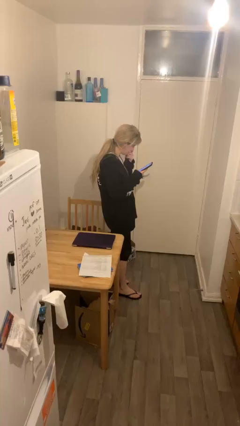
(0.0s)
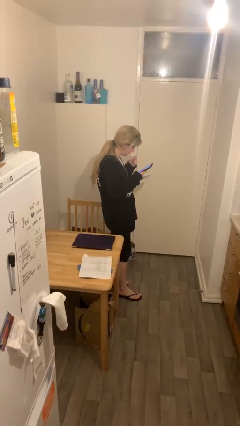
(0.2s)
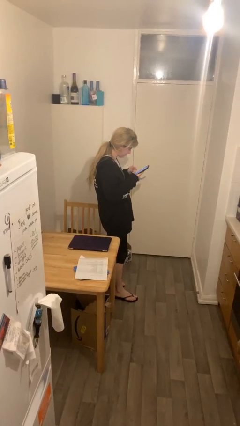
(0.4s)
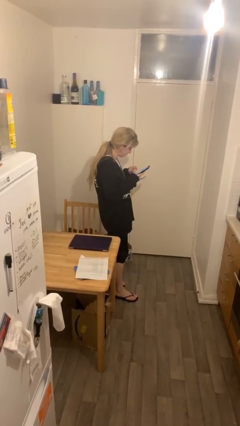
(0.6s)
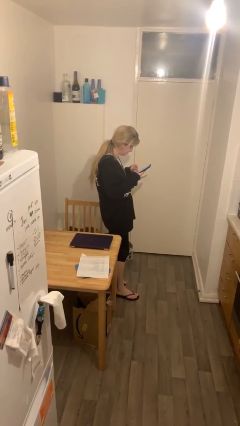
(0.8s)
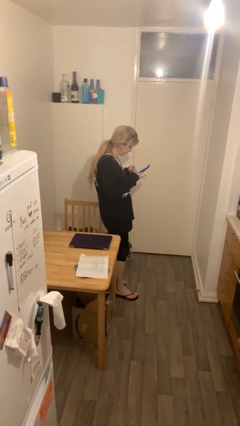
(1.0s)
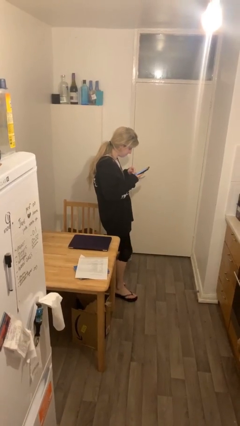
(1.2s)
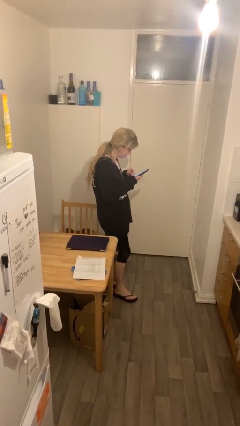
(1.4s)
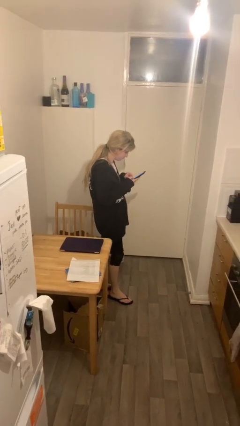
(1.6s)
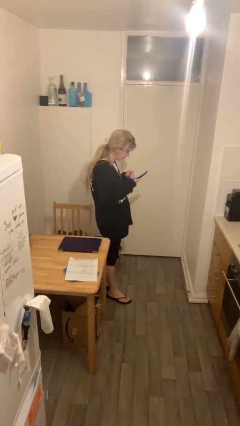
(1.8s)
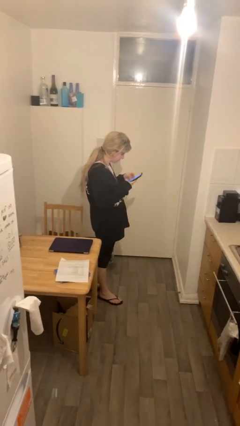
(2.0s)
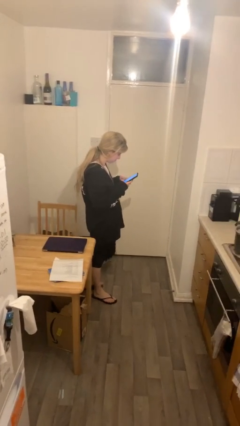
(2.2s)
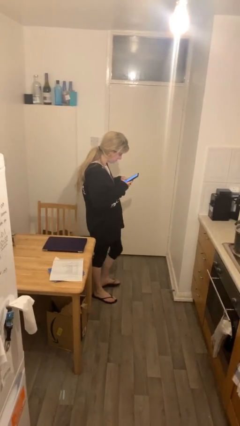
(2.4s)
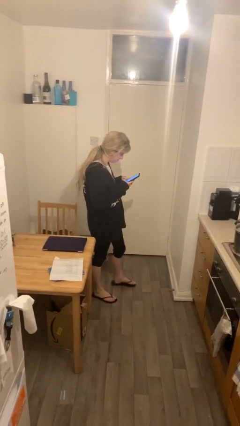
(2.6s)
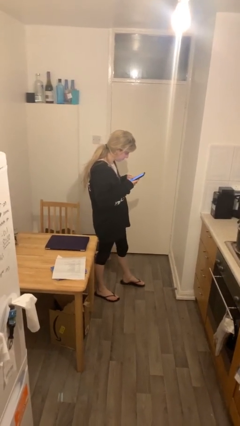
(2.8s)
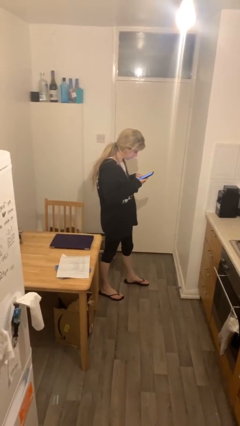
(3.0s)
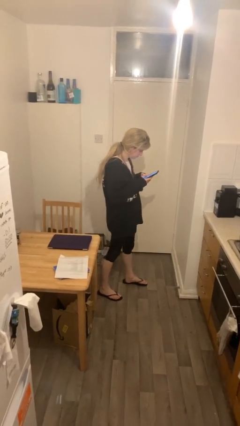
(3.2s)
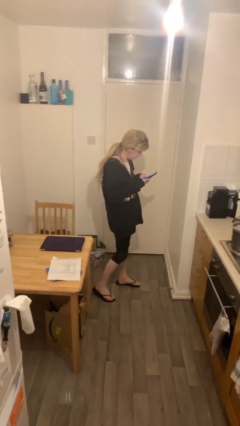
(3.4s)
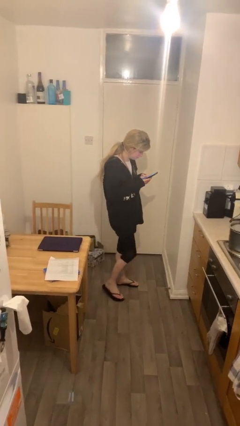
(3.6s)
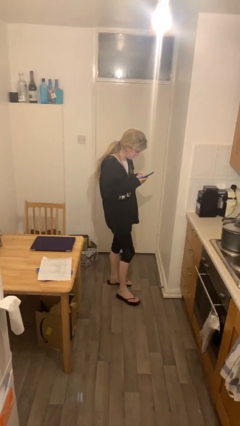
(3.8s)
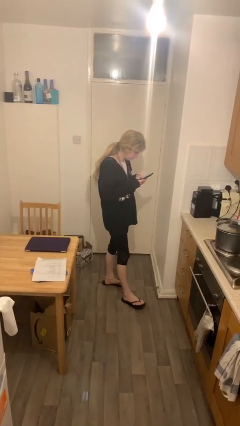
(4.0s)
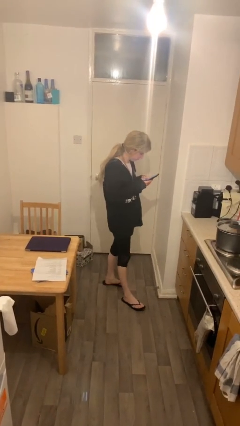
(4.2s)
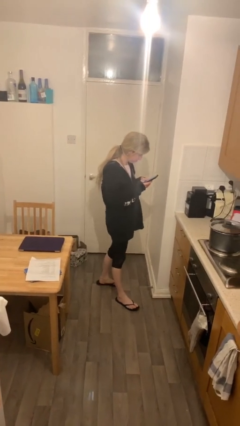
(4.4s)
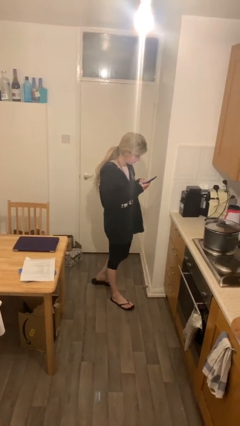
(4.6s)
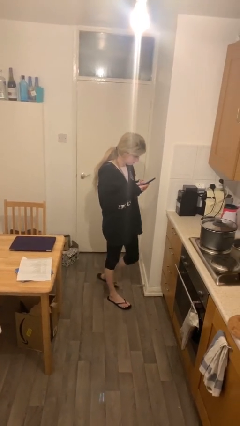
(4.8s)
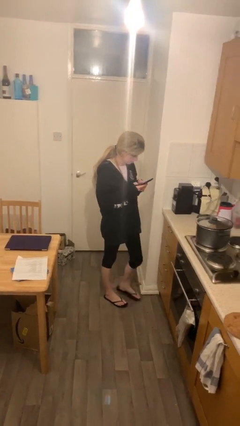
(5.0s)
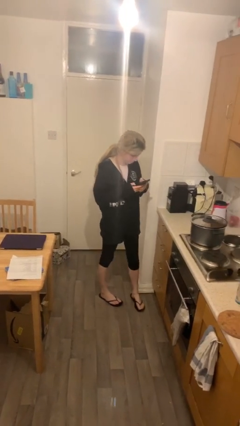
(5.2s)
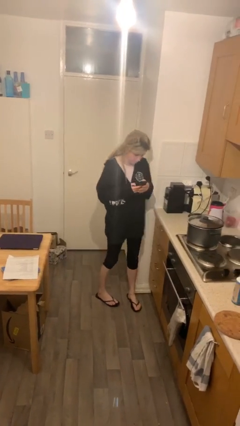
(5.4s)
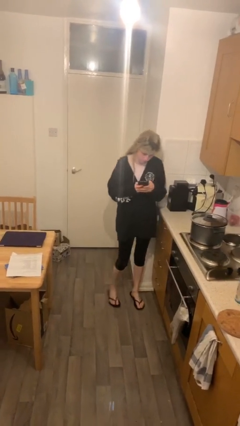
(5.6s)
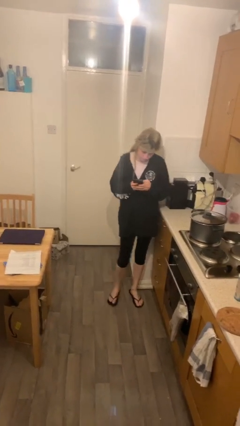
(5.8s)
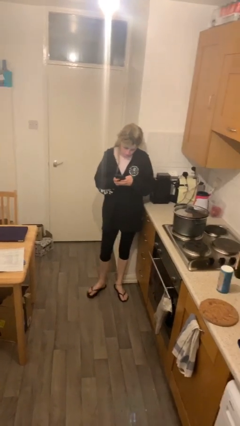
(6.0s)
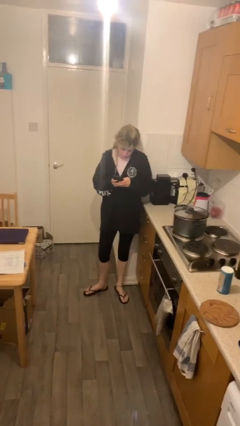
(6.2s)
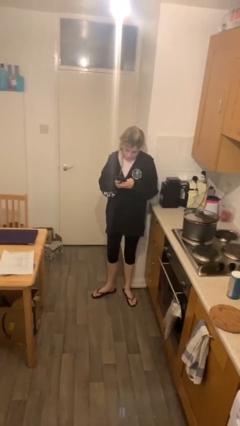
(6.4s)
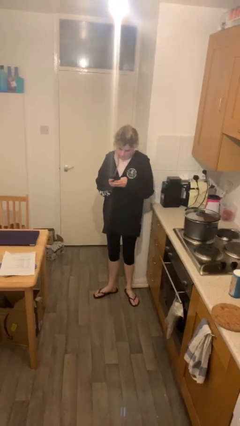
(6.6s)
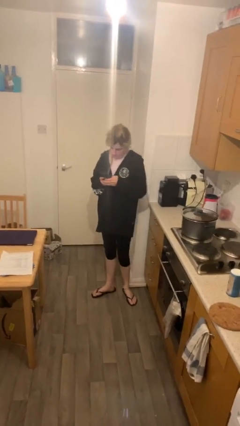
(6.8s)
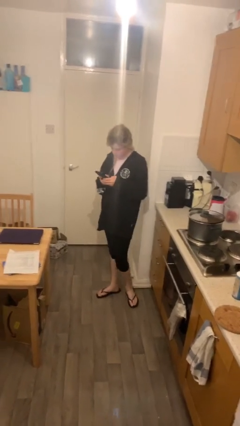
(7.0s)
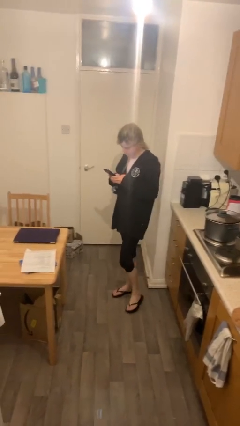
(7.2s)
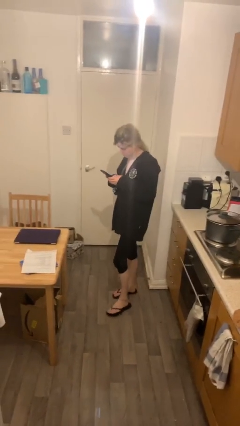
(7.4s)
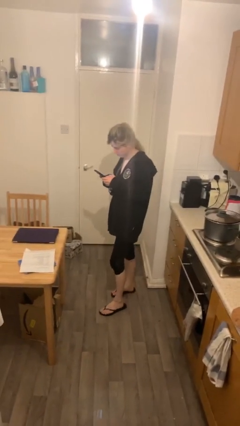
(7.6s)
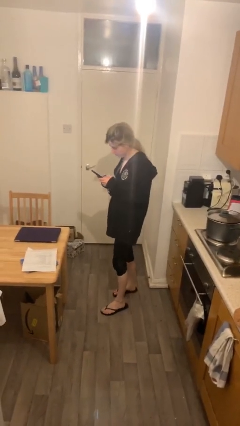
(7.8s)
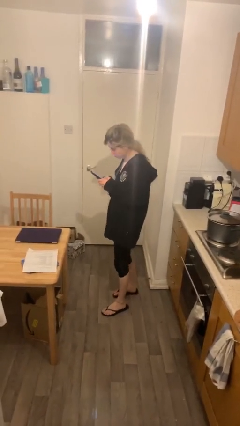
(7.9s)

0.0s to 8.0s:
person texts on phone

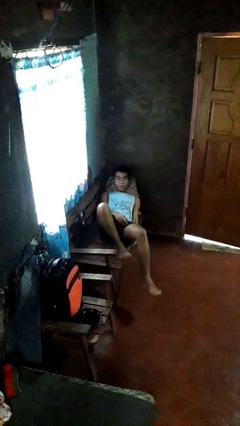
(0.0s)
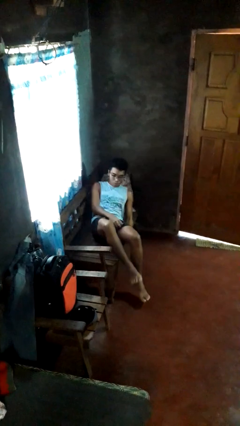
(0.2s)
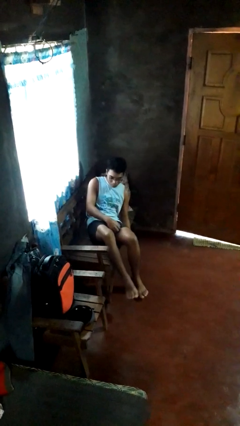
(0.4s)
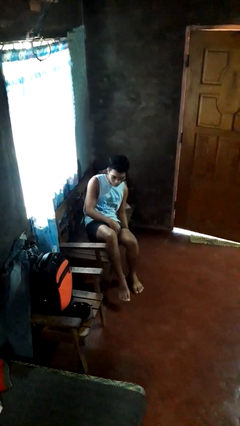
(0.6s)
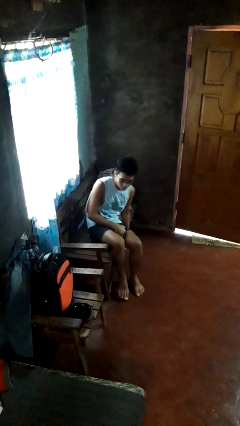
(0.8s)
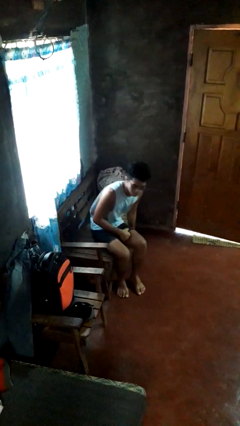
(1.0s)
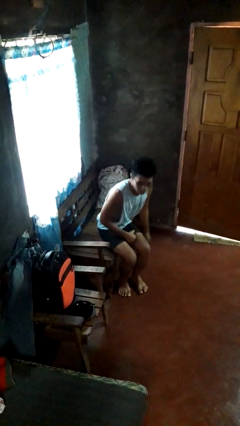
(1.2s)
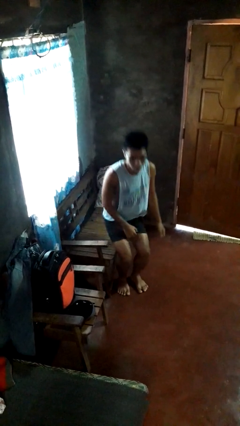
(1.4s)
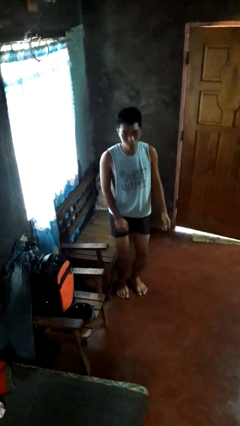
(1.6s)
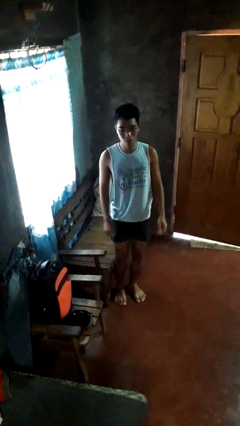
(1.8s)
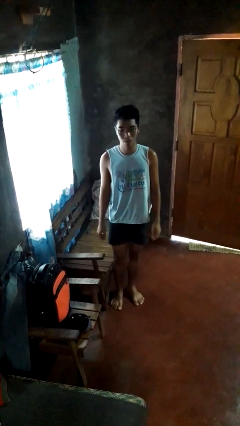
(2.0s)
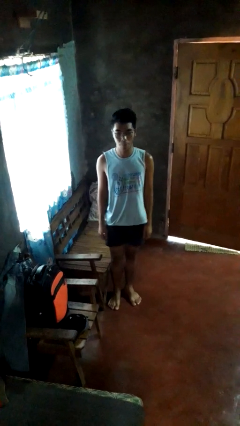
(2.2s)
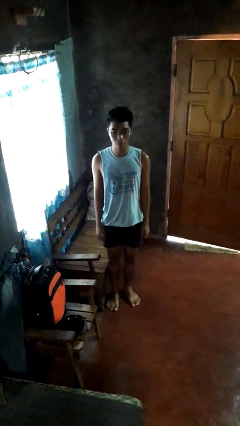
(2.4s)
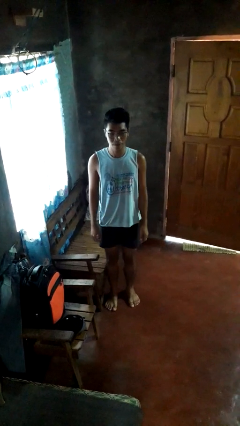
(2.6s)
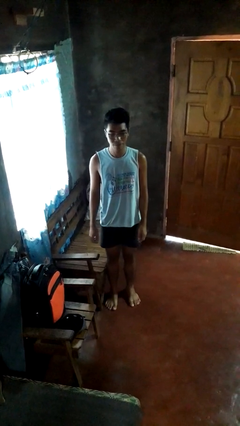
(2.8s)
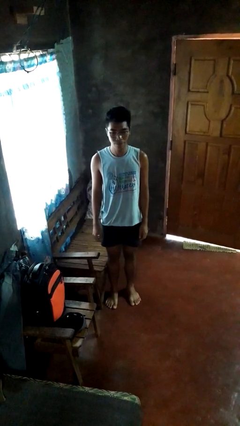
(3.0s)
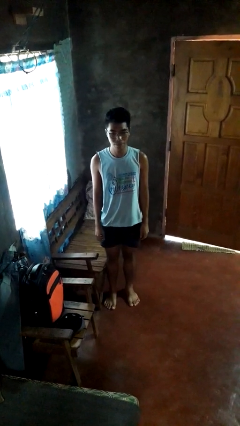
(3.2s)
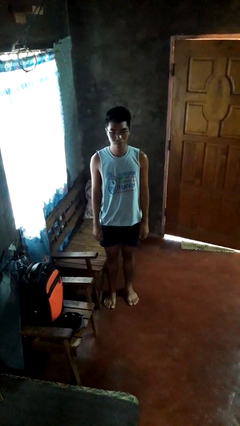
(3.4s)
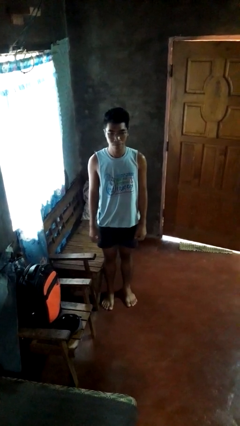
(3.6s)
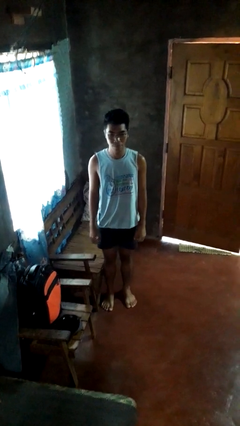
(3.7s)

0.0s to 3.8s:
person stands up

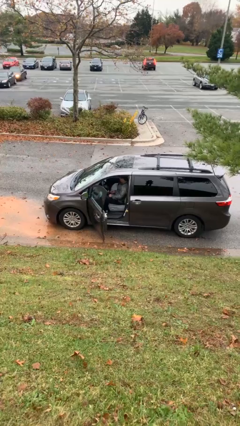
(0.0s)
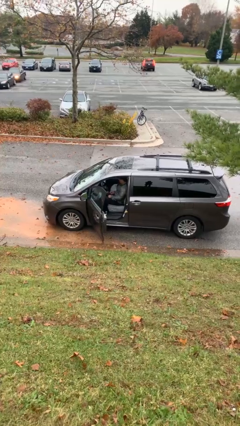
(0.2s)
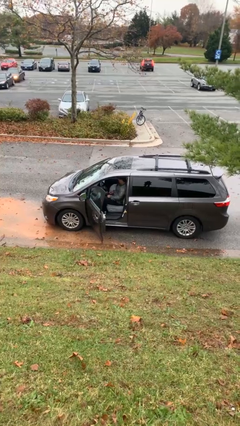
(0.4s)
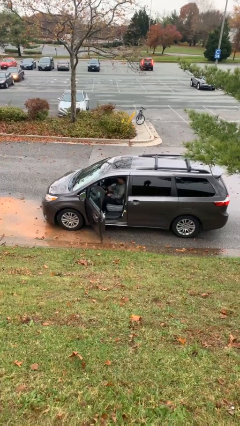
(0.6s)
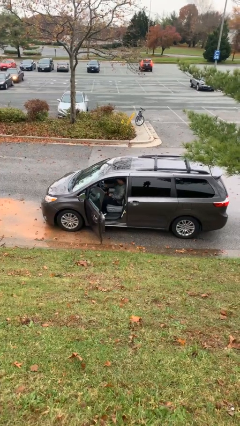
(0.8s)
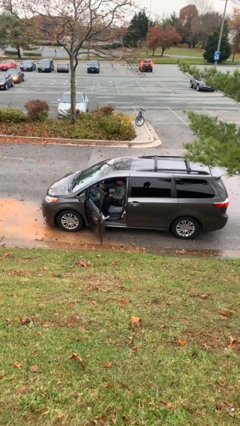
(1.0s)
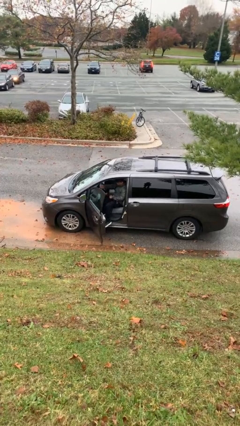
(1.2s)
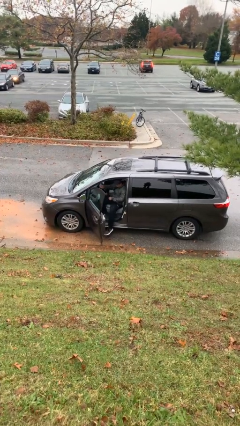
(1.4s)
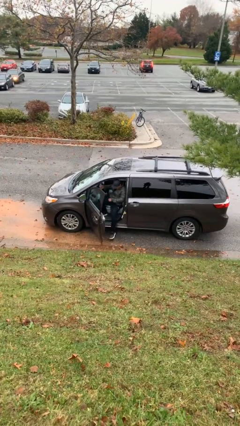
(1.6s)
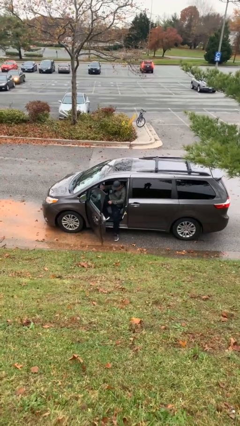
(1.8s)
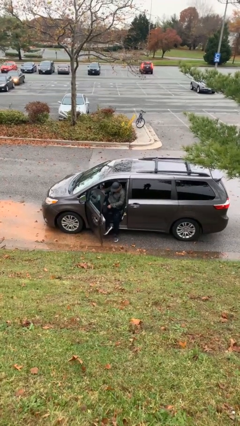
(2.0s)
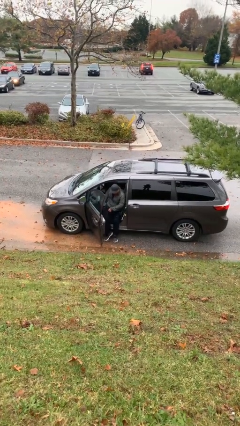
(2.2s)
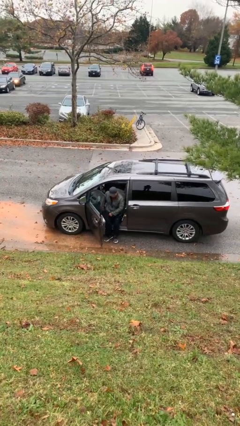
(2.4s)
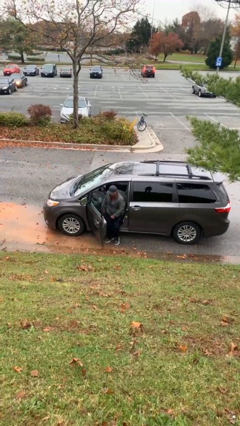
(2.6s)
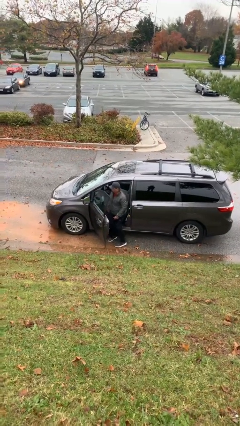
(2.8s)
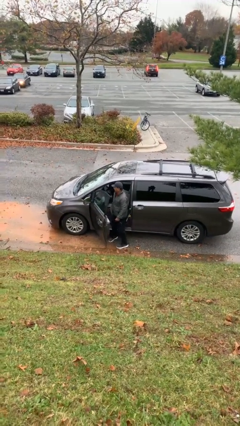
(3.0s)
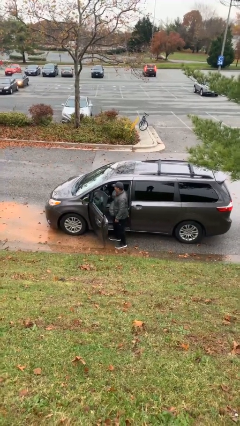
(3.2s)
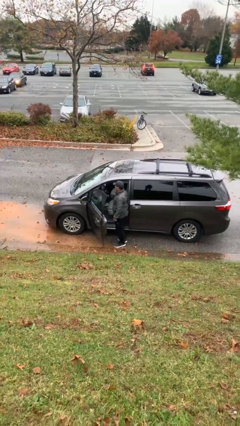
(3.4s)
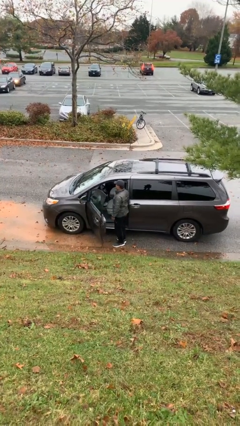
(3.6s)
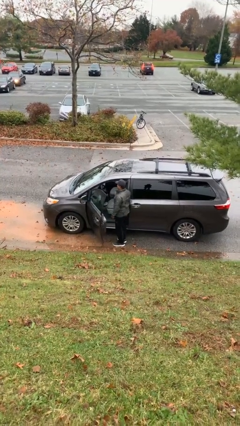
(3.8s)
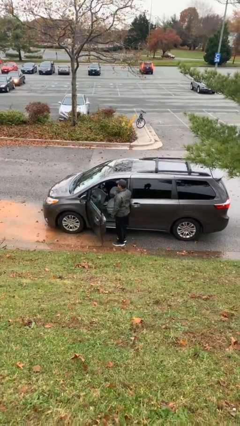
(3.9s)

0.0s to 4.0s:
person exits car

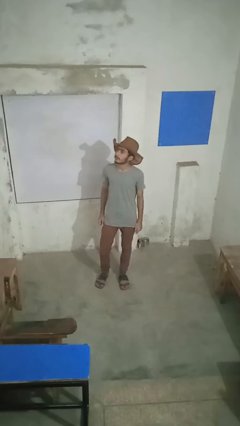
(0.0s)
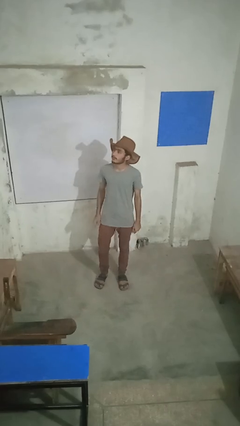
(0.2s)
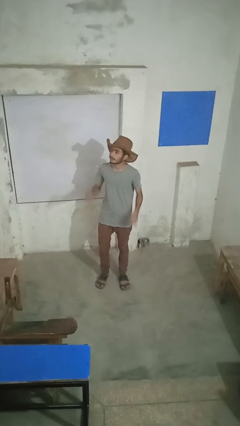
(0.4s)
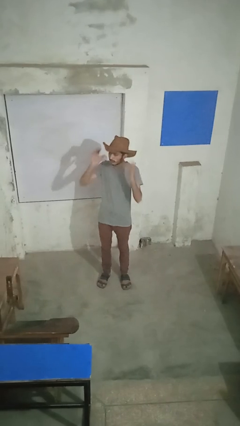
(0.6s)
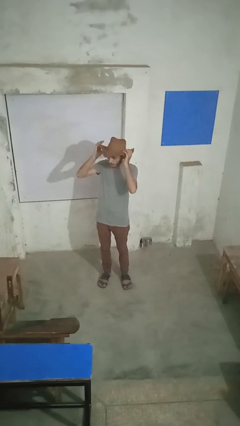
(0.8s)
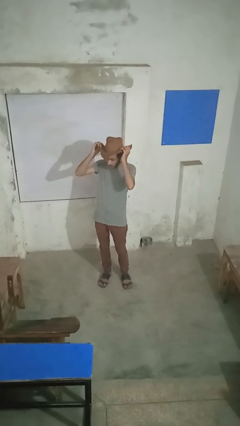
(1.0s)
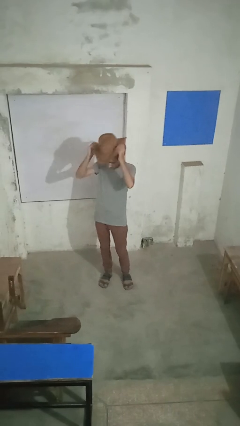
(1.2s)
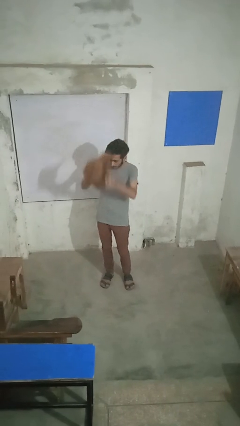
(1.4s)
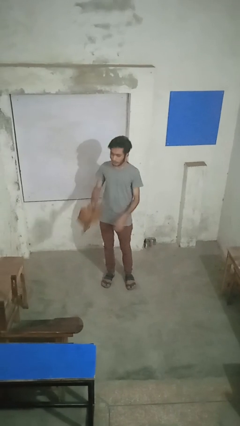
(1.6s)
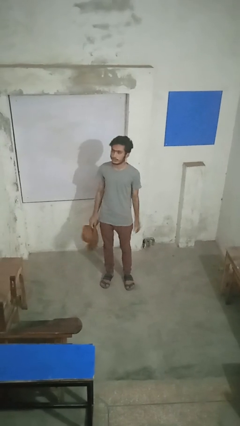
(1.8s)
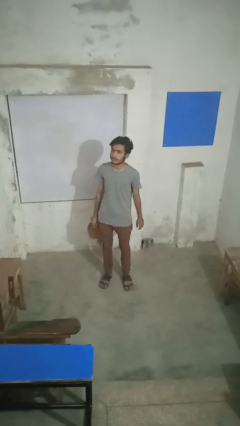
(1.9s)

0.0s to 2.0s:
person takes off hat

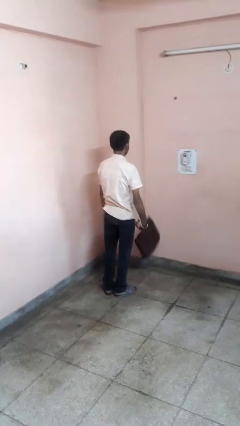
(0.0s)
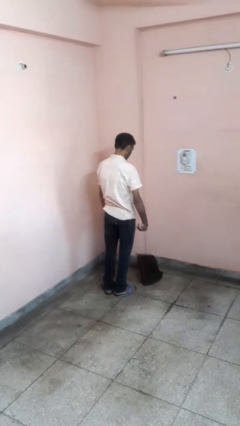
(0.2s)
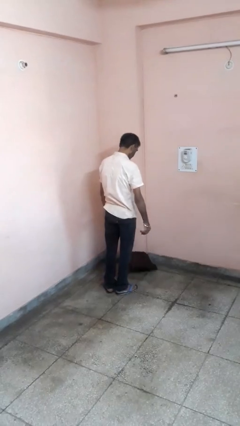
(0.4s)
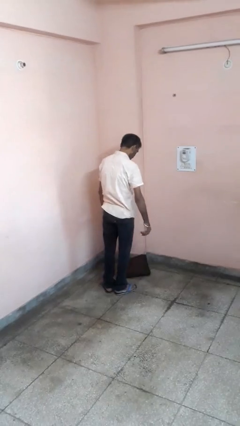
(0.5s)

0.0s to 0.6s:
person throws object to ground
